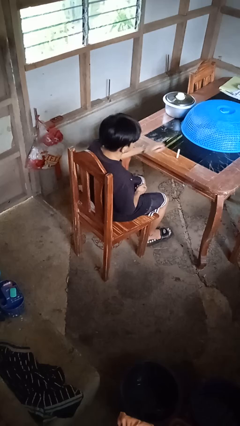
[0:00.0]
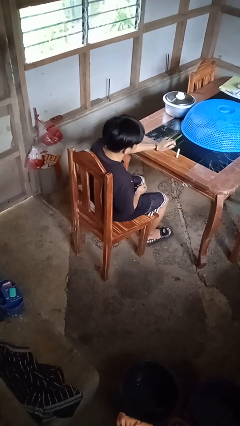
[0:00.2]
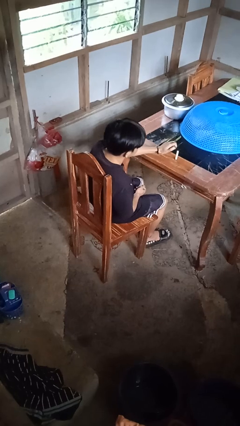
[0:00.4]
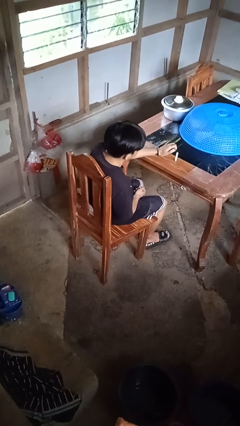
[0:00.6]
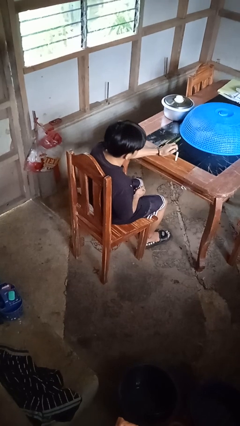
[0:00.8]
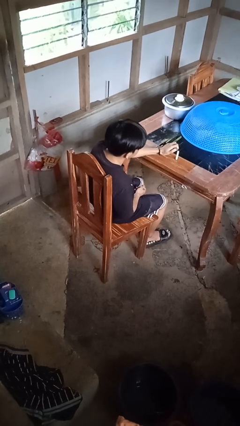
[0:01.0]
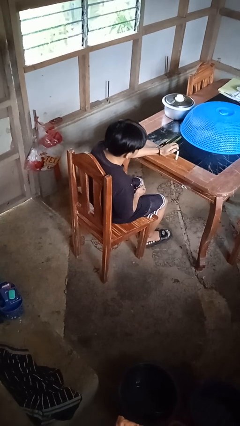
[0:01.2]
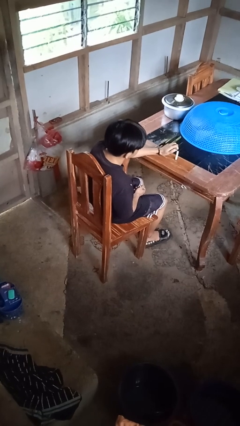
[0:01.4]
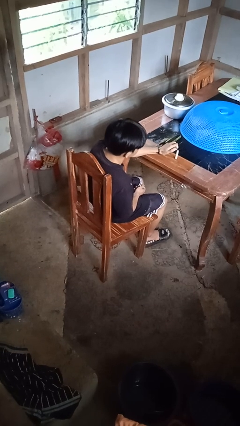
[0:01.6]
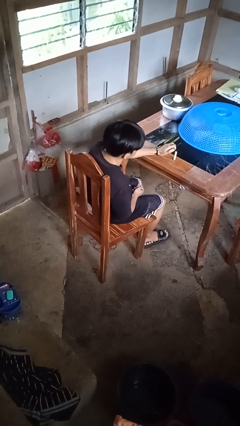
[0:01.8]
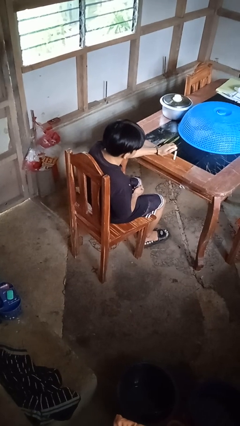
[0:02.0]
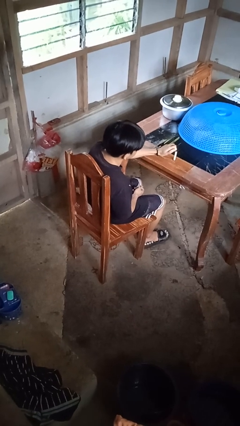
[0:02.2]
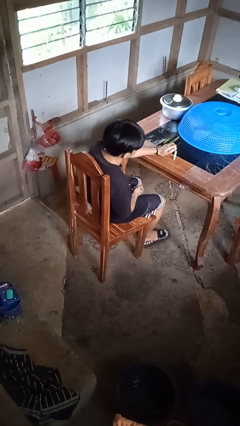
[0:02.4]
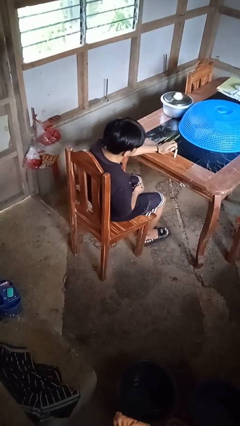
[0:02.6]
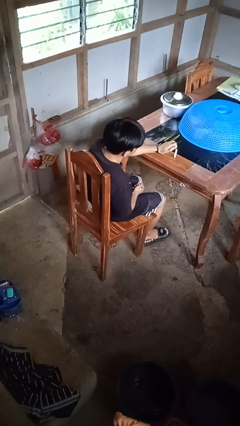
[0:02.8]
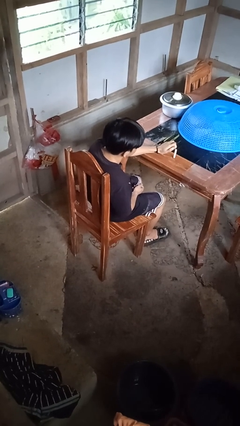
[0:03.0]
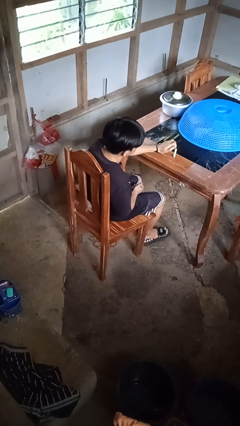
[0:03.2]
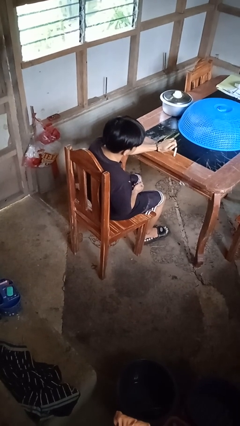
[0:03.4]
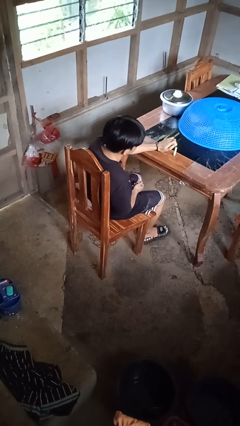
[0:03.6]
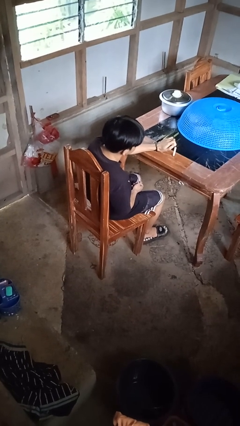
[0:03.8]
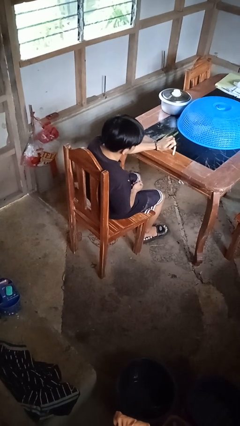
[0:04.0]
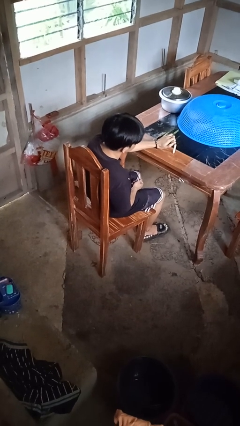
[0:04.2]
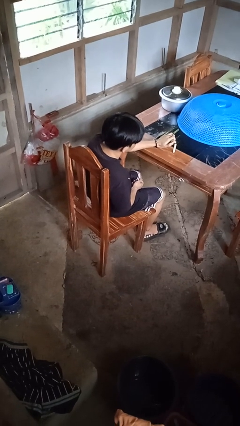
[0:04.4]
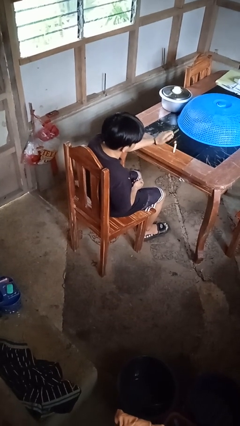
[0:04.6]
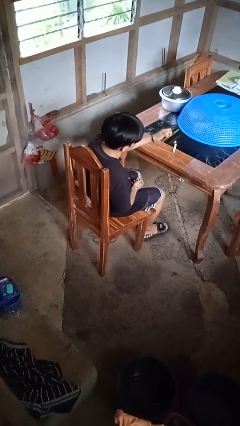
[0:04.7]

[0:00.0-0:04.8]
person lights candle

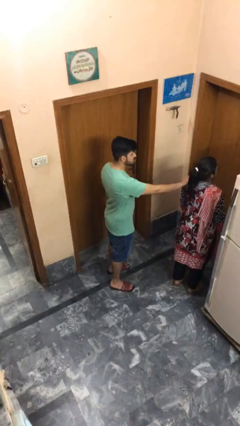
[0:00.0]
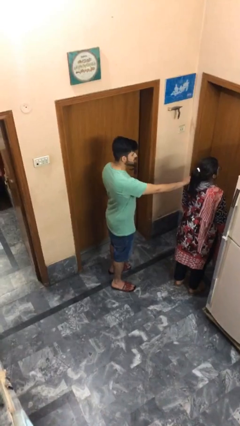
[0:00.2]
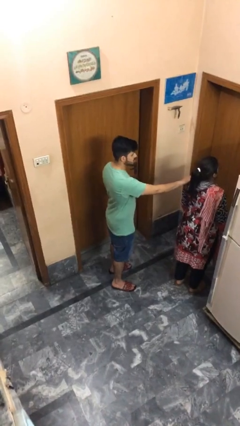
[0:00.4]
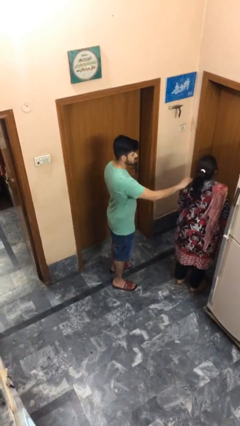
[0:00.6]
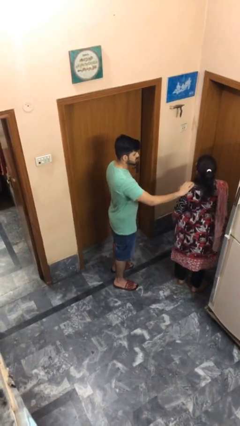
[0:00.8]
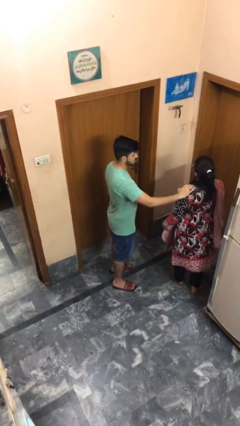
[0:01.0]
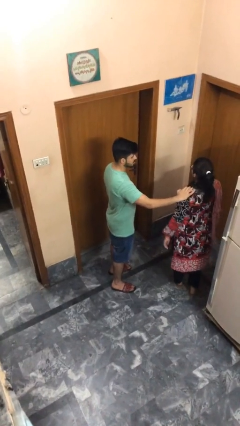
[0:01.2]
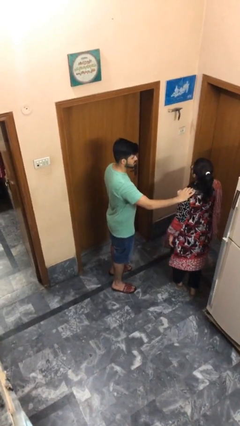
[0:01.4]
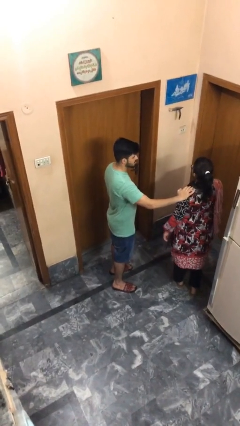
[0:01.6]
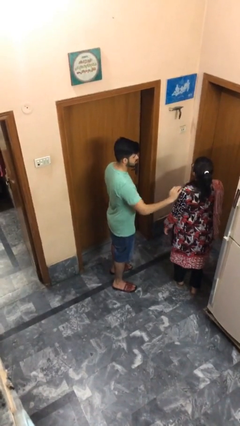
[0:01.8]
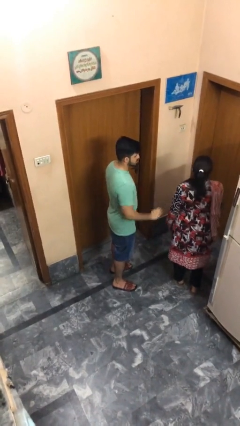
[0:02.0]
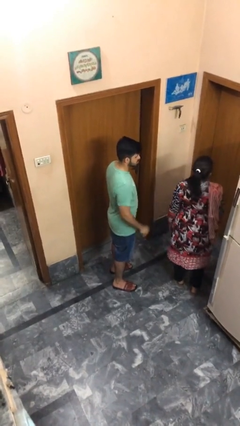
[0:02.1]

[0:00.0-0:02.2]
person spins person around

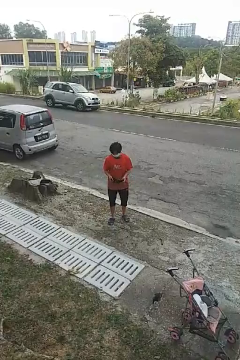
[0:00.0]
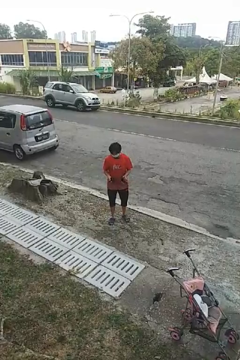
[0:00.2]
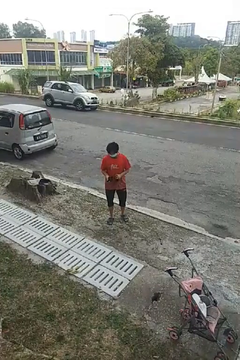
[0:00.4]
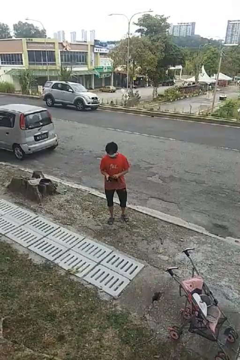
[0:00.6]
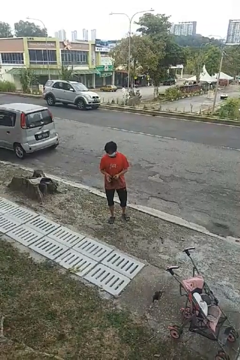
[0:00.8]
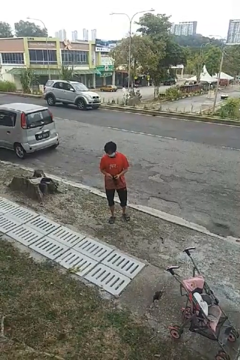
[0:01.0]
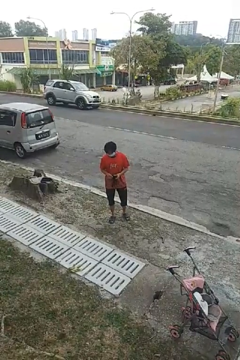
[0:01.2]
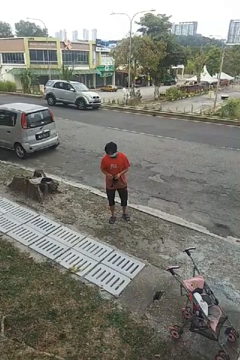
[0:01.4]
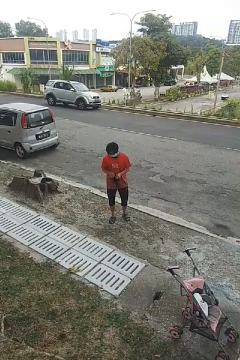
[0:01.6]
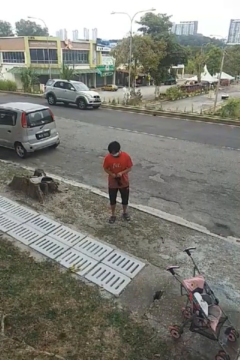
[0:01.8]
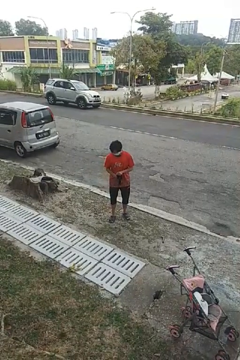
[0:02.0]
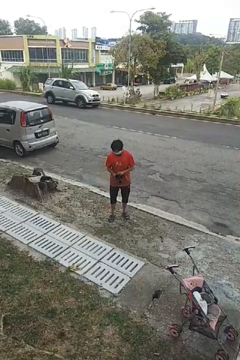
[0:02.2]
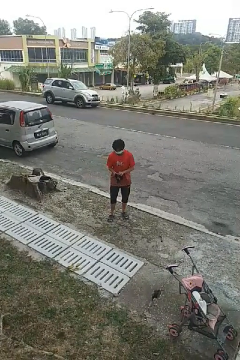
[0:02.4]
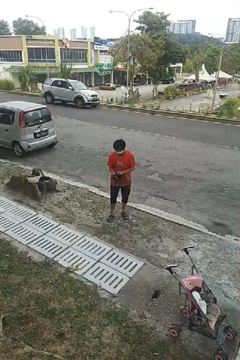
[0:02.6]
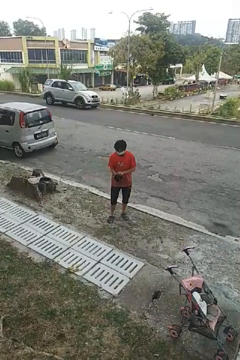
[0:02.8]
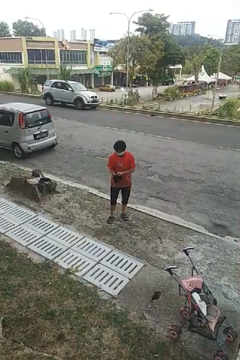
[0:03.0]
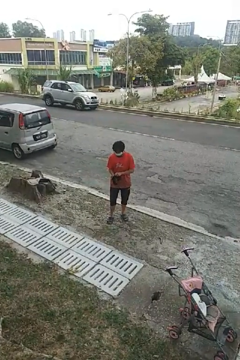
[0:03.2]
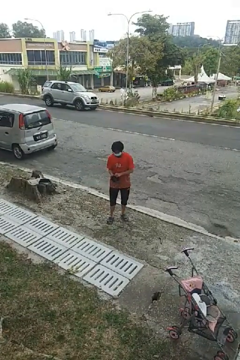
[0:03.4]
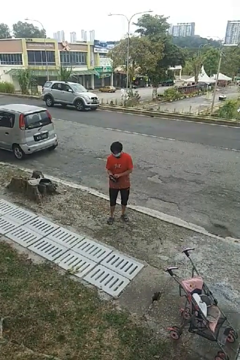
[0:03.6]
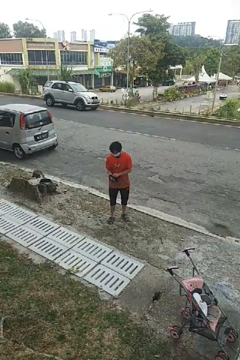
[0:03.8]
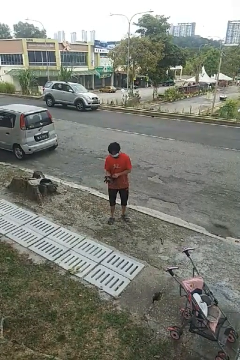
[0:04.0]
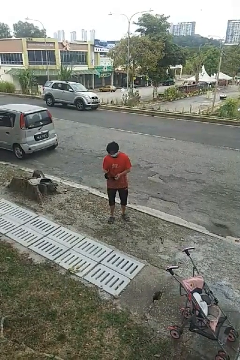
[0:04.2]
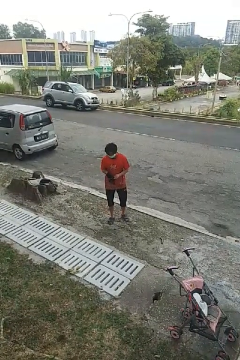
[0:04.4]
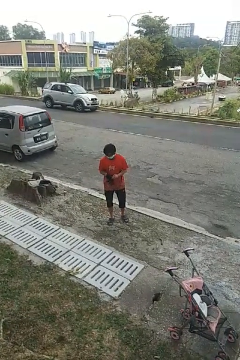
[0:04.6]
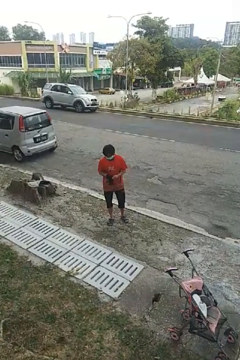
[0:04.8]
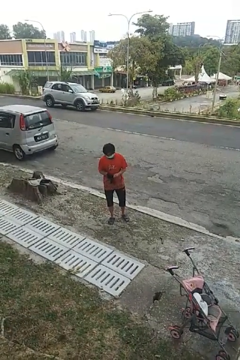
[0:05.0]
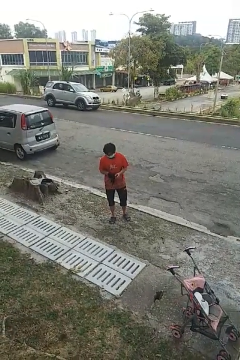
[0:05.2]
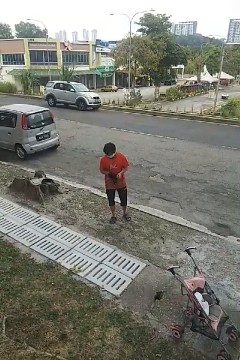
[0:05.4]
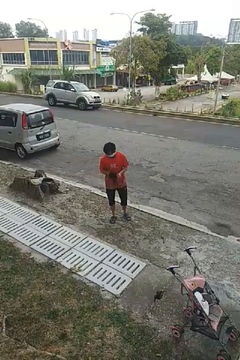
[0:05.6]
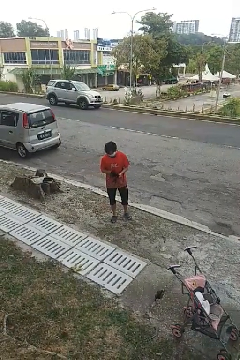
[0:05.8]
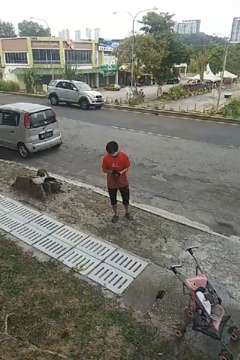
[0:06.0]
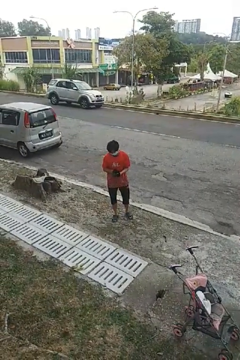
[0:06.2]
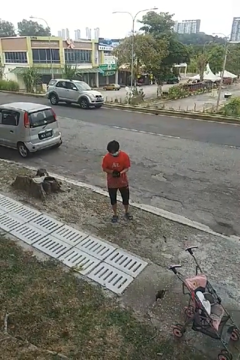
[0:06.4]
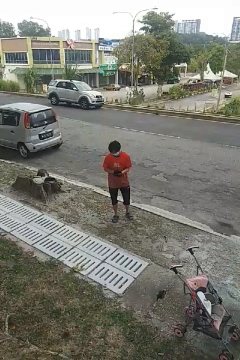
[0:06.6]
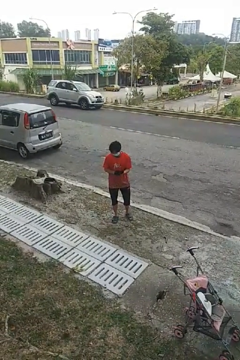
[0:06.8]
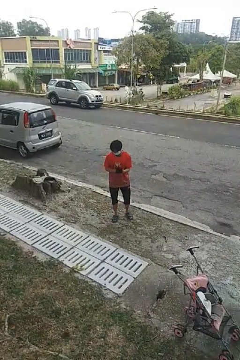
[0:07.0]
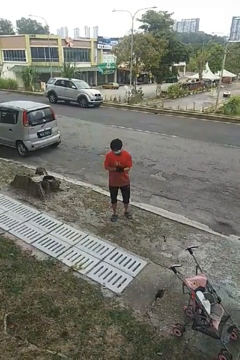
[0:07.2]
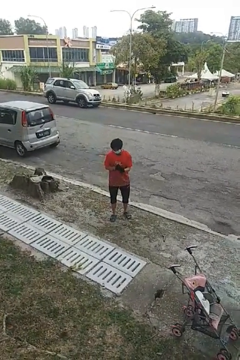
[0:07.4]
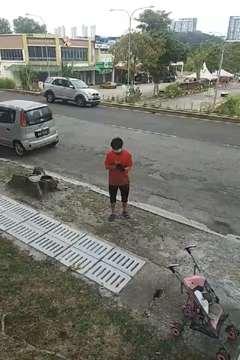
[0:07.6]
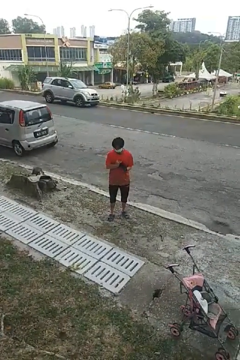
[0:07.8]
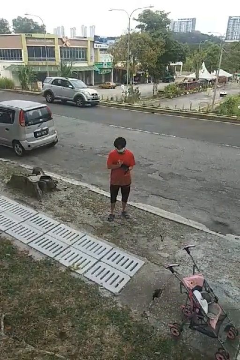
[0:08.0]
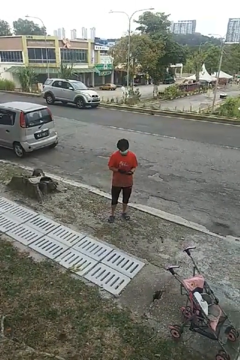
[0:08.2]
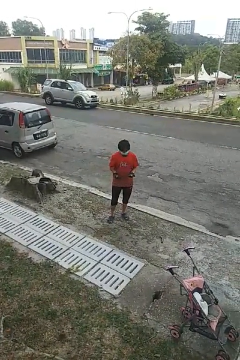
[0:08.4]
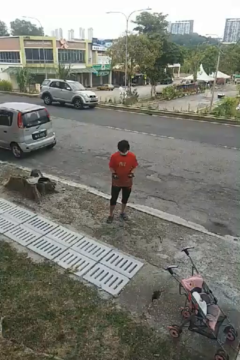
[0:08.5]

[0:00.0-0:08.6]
person puts on gloves

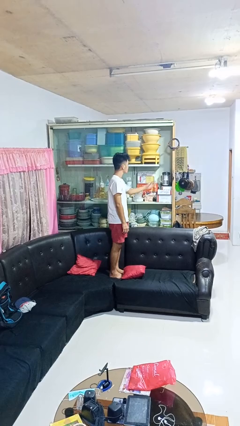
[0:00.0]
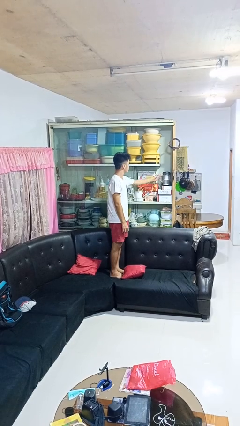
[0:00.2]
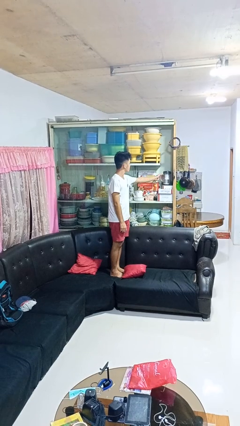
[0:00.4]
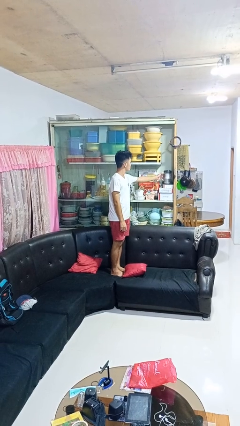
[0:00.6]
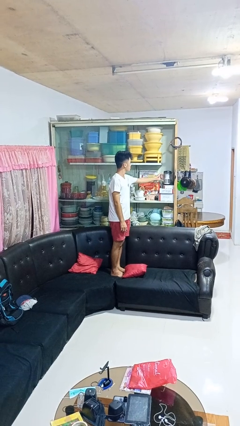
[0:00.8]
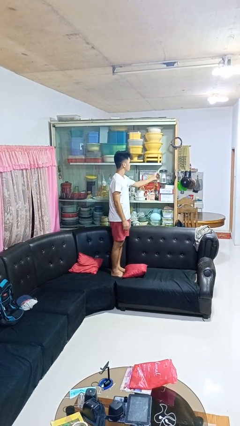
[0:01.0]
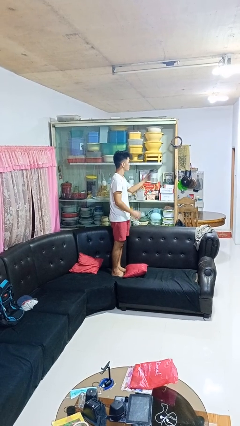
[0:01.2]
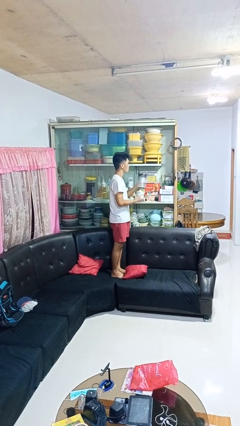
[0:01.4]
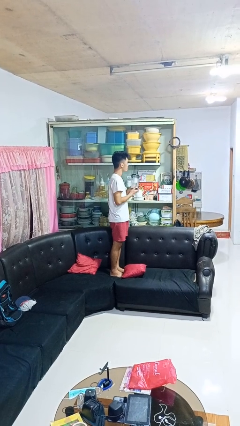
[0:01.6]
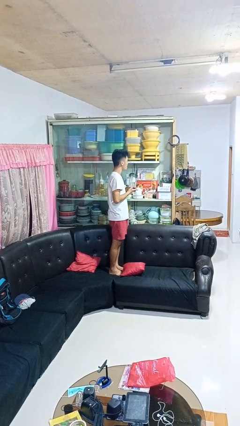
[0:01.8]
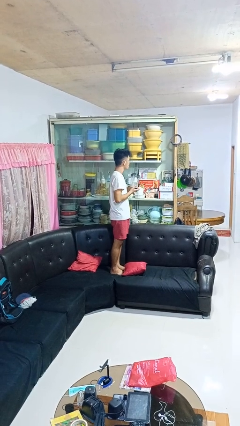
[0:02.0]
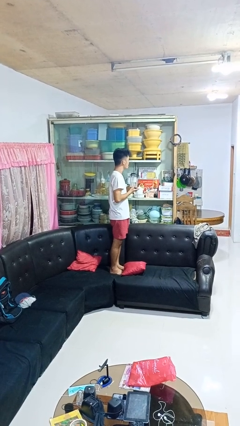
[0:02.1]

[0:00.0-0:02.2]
person picks up object from cabinet

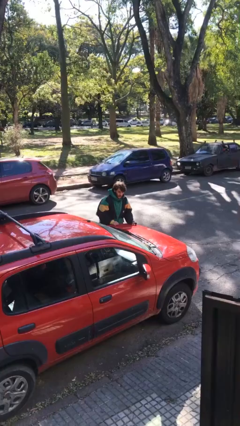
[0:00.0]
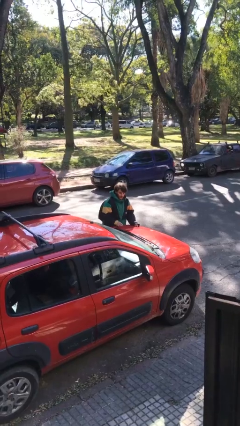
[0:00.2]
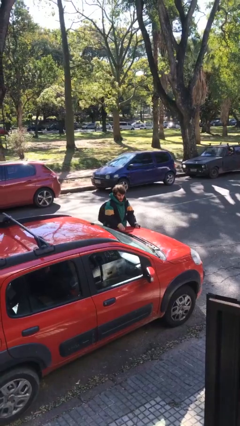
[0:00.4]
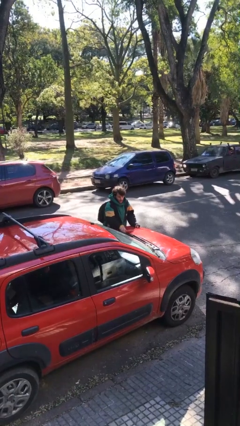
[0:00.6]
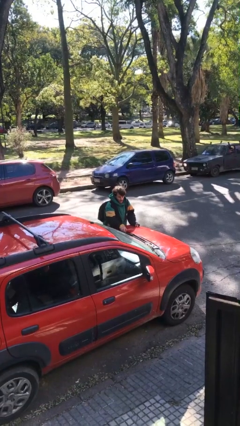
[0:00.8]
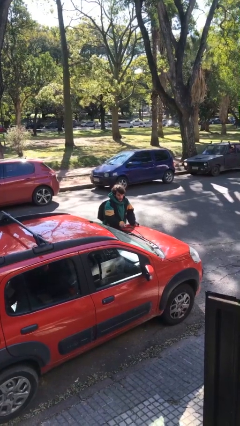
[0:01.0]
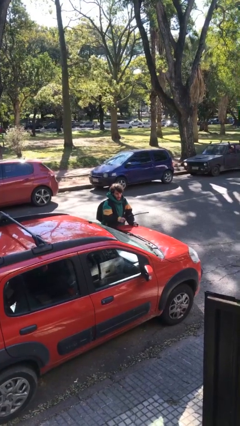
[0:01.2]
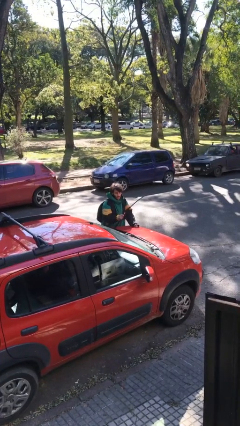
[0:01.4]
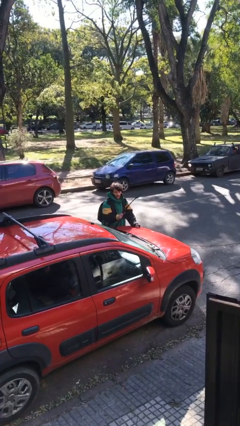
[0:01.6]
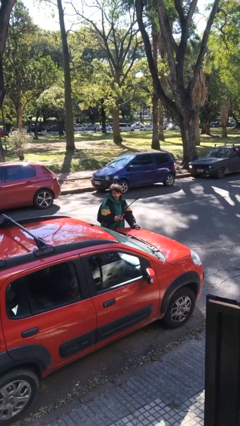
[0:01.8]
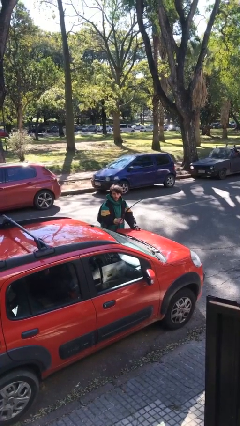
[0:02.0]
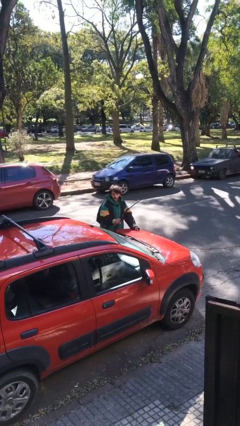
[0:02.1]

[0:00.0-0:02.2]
person flips up car wipers
